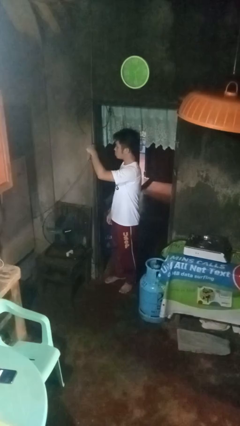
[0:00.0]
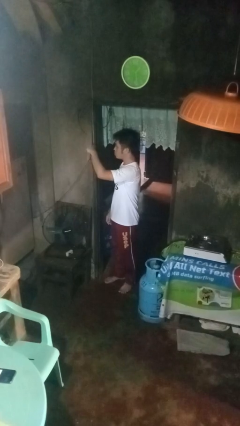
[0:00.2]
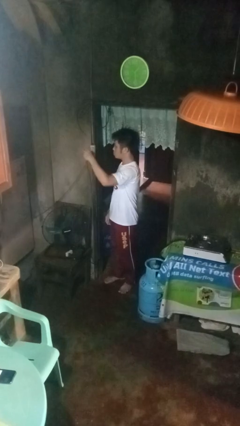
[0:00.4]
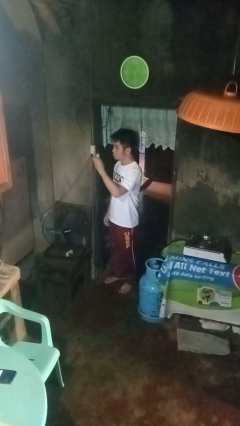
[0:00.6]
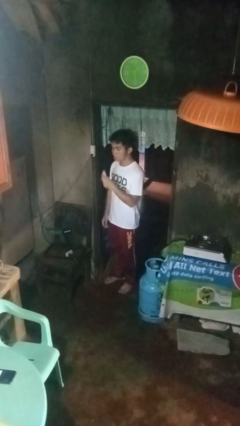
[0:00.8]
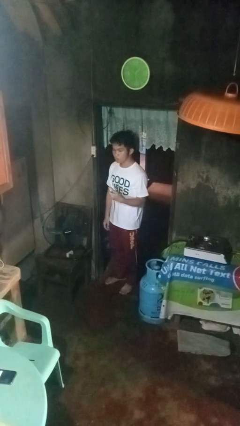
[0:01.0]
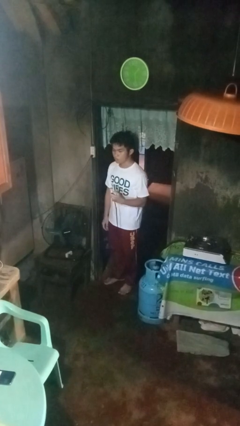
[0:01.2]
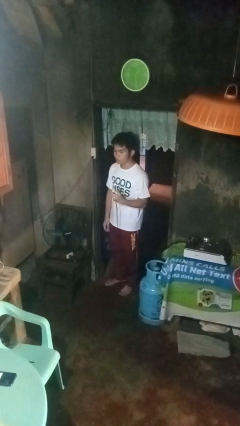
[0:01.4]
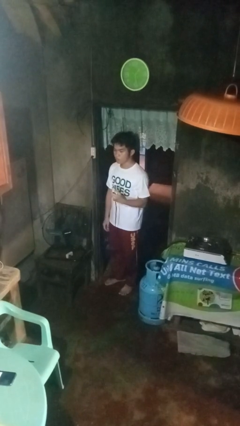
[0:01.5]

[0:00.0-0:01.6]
person unplugs from electrical socket

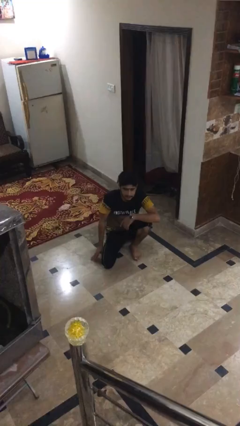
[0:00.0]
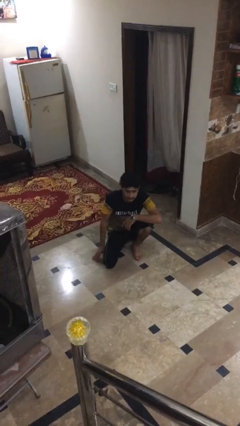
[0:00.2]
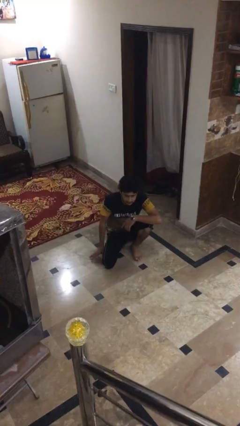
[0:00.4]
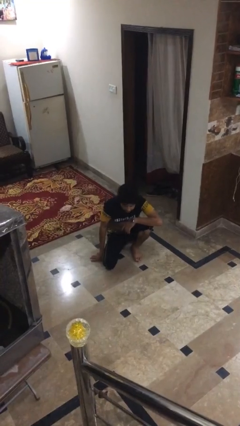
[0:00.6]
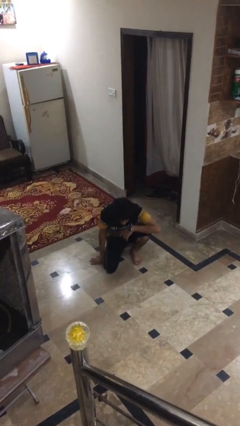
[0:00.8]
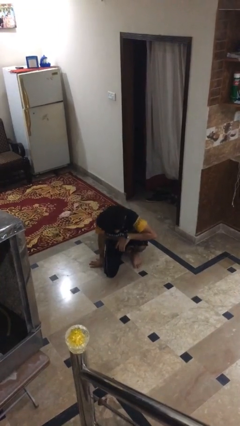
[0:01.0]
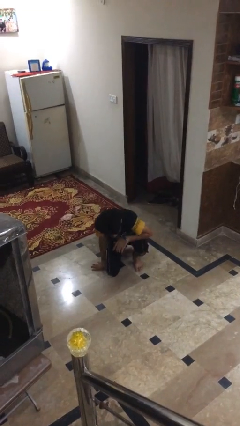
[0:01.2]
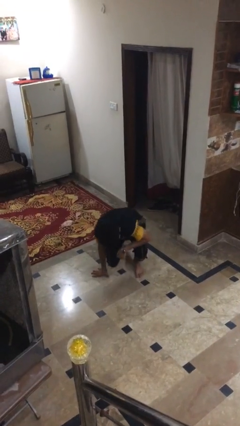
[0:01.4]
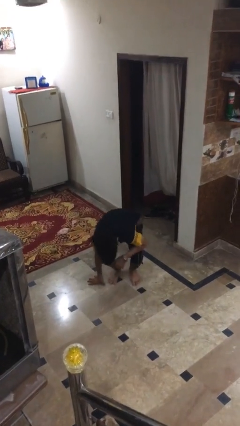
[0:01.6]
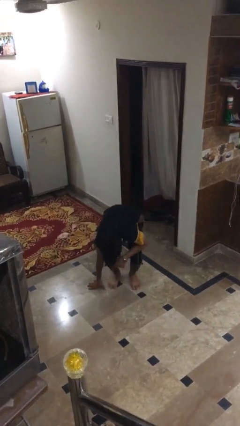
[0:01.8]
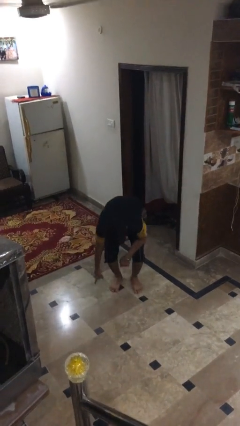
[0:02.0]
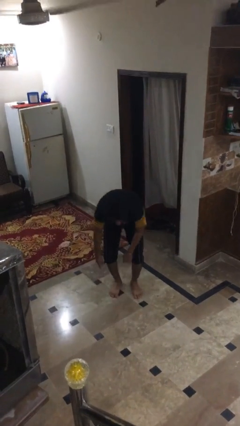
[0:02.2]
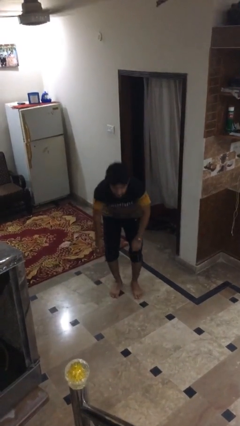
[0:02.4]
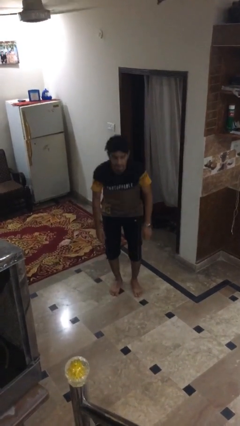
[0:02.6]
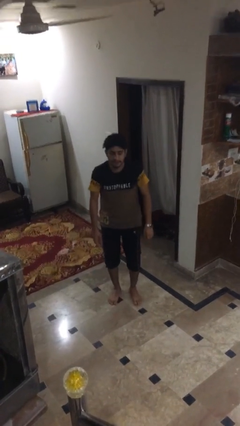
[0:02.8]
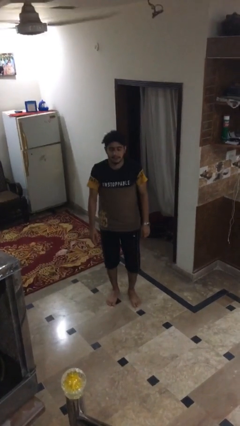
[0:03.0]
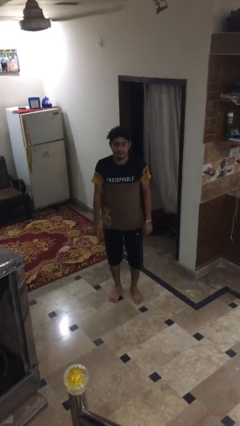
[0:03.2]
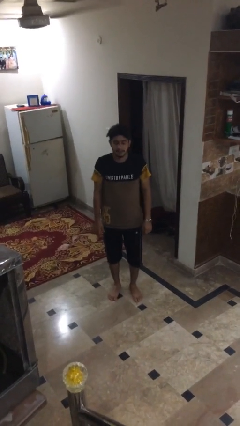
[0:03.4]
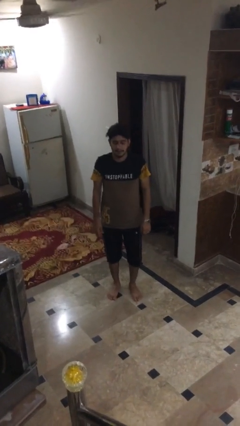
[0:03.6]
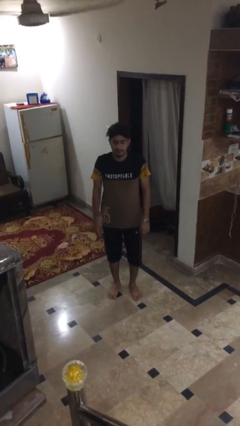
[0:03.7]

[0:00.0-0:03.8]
person stands up from floor

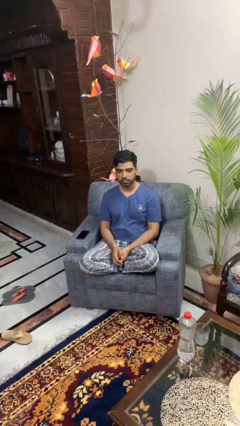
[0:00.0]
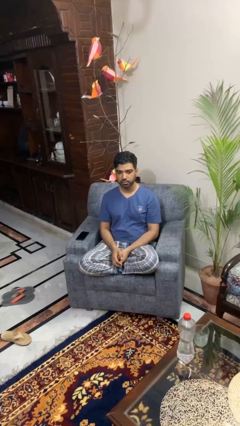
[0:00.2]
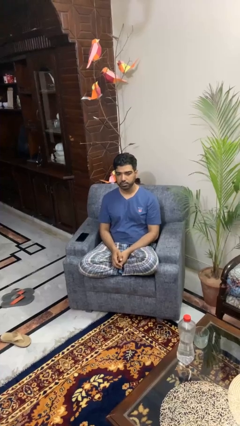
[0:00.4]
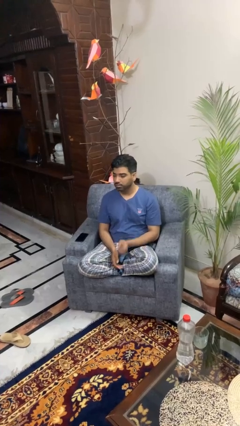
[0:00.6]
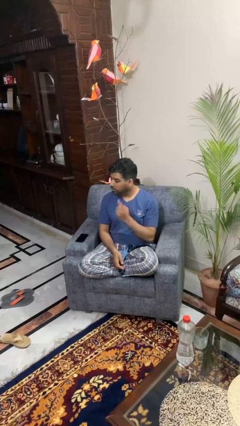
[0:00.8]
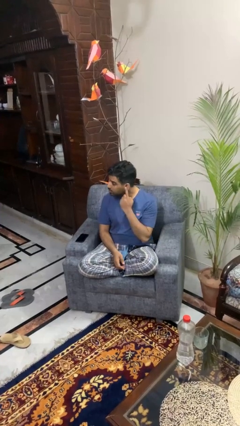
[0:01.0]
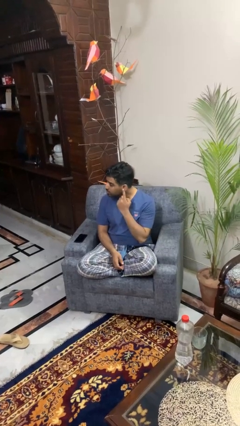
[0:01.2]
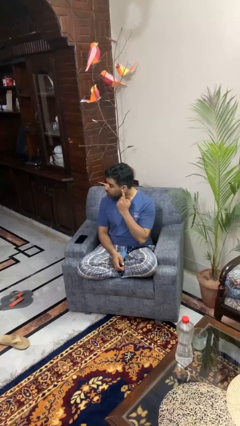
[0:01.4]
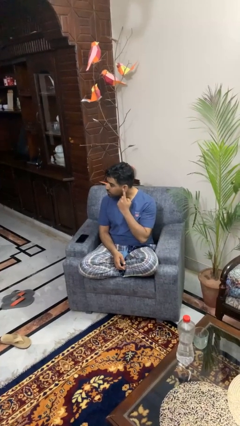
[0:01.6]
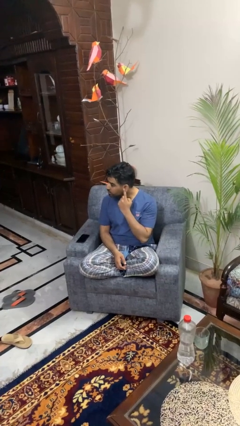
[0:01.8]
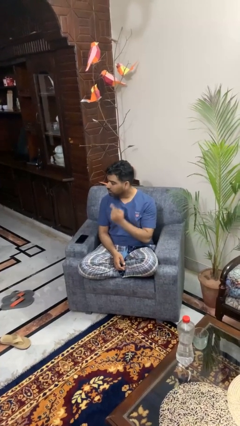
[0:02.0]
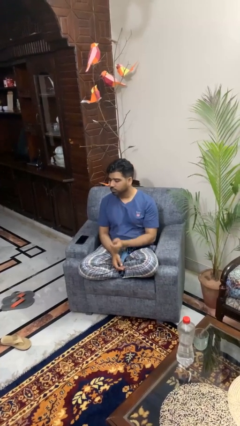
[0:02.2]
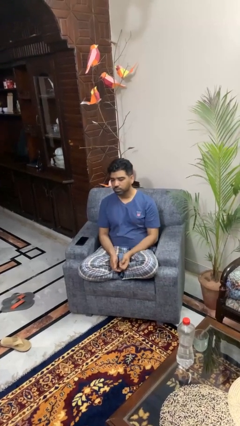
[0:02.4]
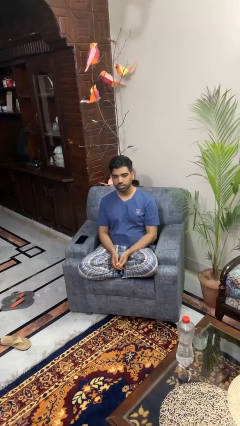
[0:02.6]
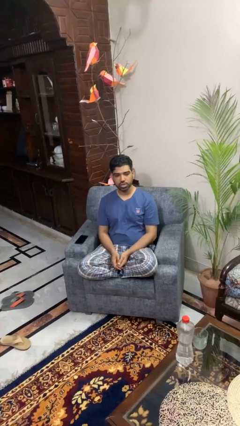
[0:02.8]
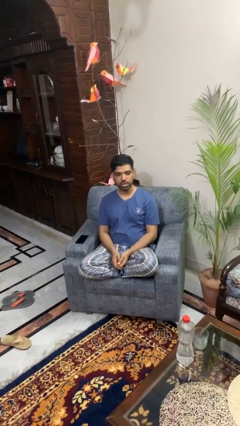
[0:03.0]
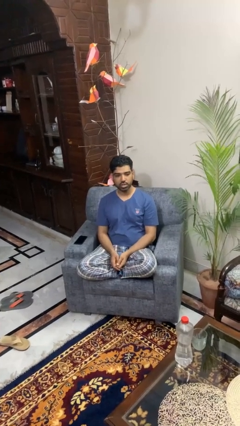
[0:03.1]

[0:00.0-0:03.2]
person gestures listen closely

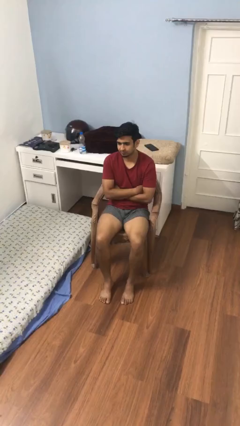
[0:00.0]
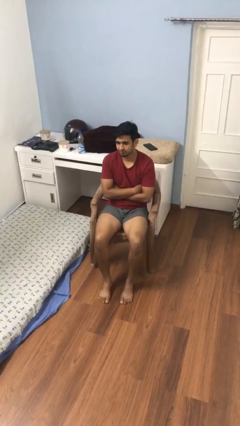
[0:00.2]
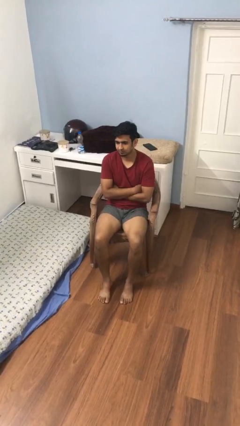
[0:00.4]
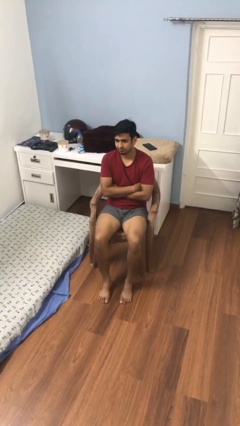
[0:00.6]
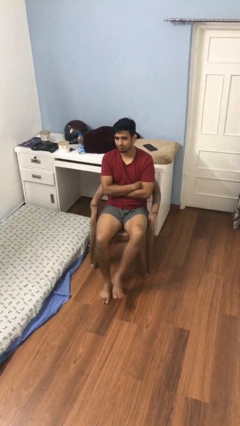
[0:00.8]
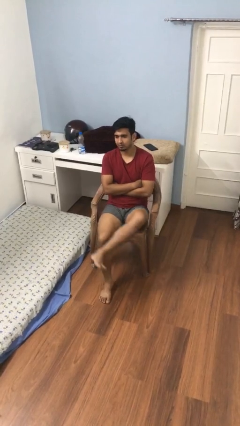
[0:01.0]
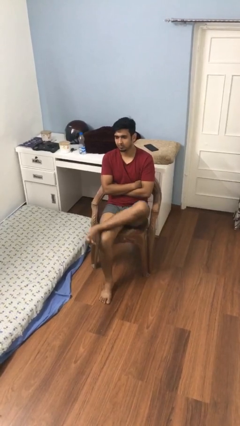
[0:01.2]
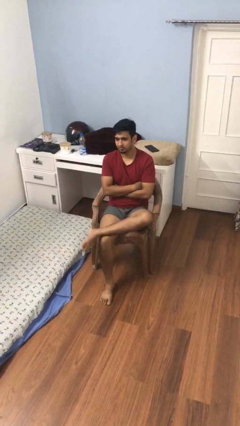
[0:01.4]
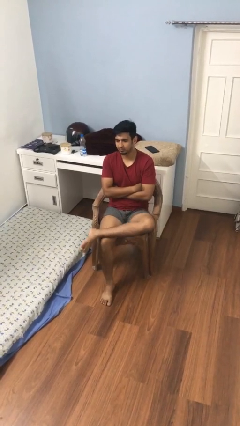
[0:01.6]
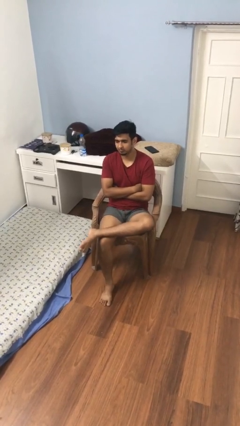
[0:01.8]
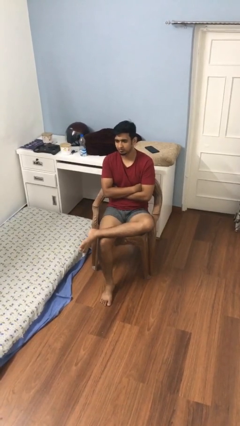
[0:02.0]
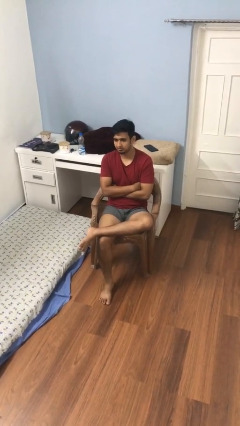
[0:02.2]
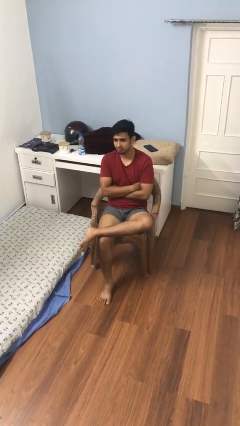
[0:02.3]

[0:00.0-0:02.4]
person crosses legs

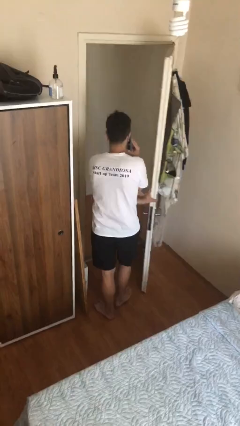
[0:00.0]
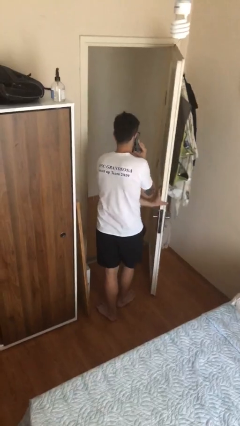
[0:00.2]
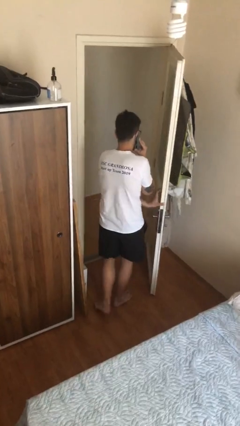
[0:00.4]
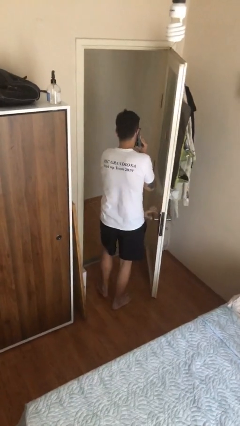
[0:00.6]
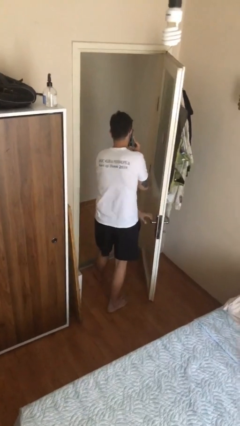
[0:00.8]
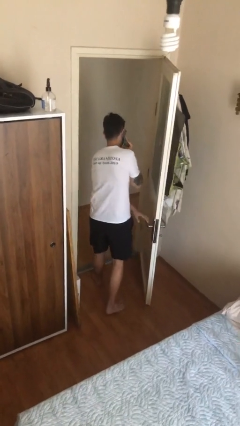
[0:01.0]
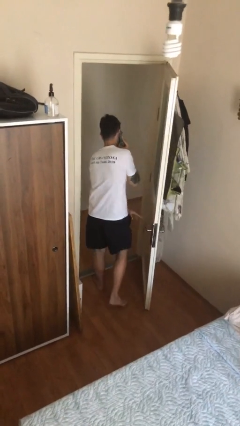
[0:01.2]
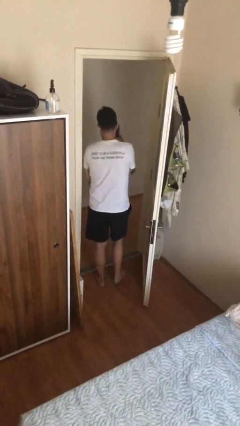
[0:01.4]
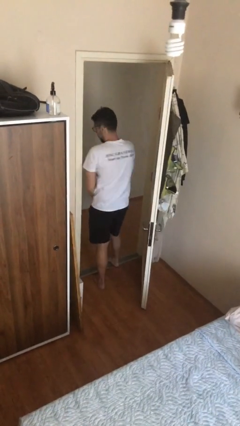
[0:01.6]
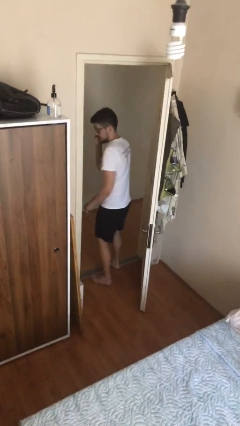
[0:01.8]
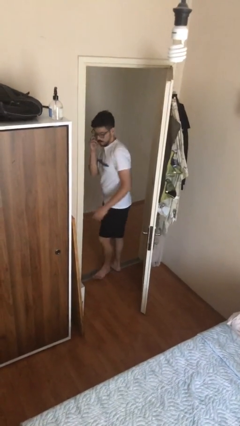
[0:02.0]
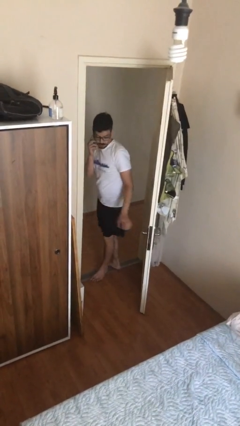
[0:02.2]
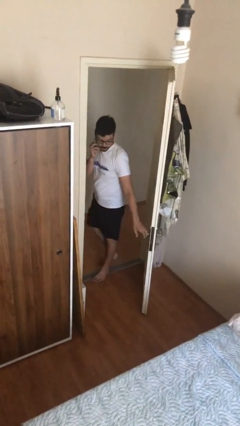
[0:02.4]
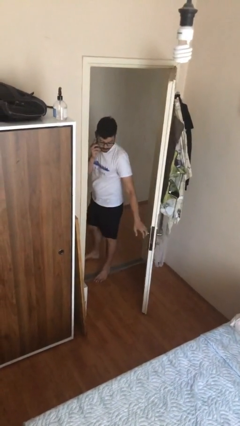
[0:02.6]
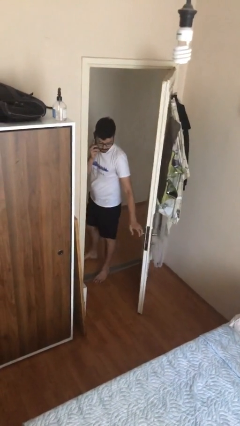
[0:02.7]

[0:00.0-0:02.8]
person exits scene through structure

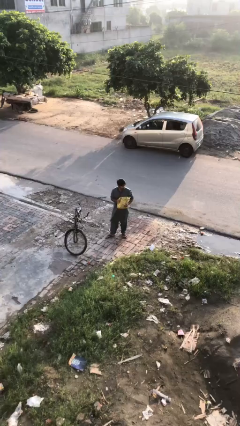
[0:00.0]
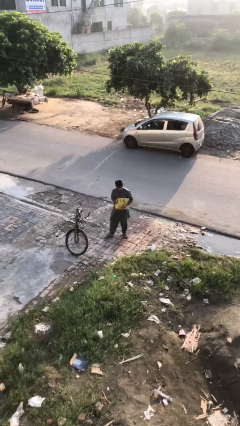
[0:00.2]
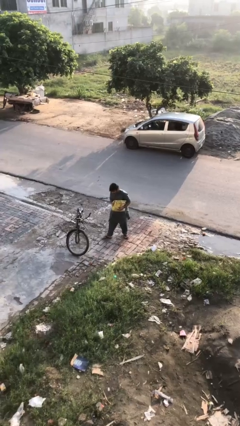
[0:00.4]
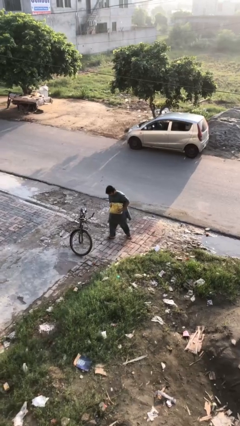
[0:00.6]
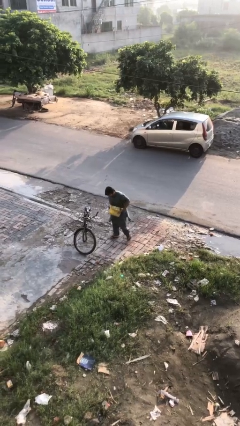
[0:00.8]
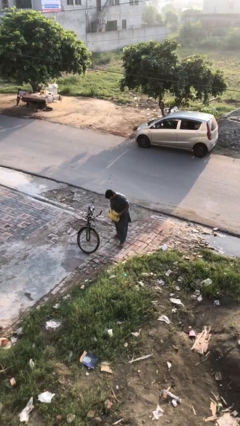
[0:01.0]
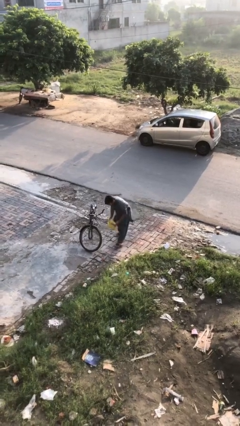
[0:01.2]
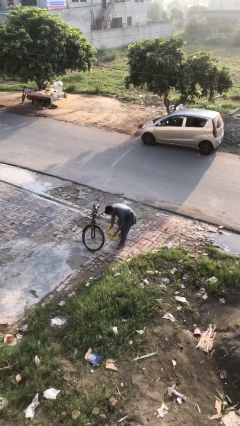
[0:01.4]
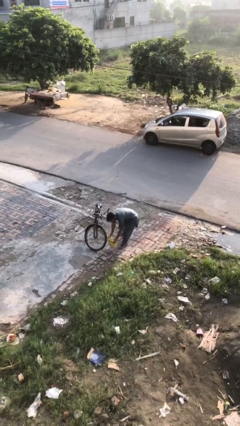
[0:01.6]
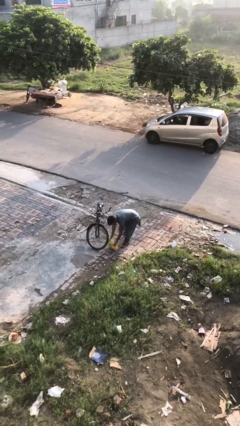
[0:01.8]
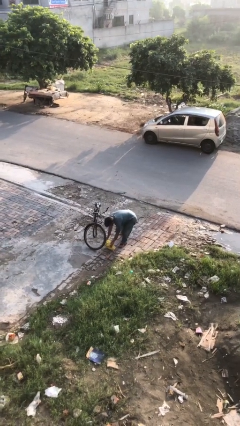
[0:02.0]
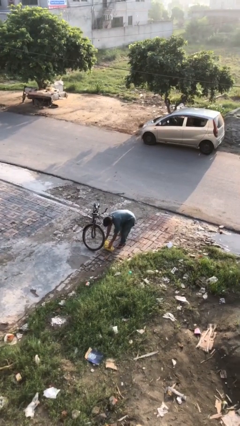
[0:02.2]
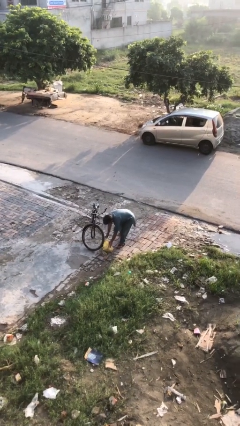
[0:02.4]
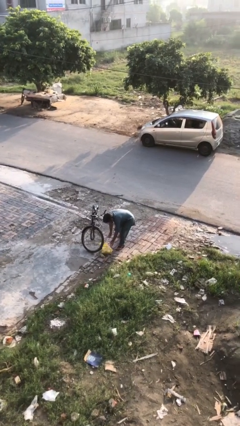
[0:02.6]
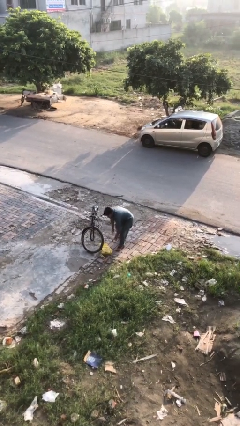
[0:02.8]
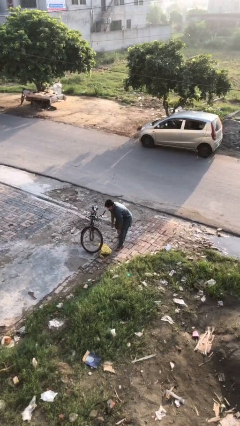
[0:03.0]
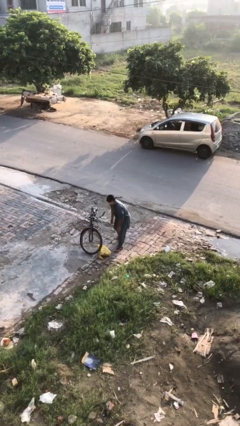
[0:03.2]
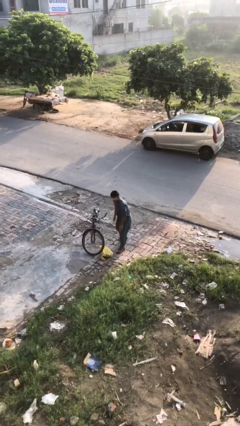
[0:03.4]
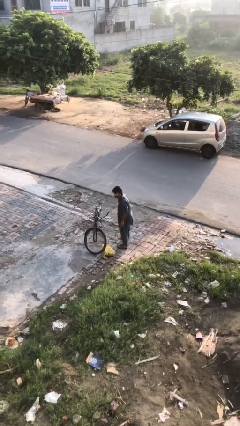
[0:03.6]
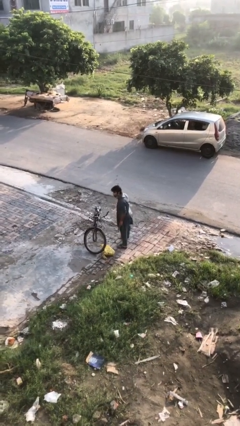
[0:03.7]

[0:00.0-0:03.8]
person puts down object on floor
